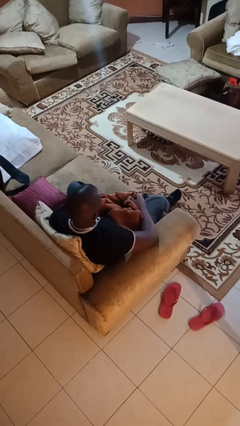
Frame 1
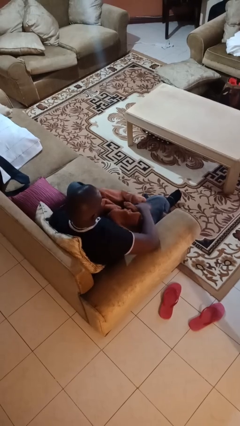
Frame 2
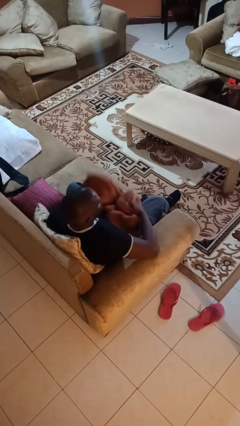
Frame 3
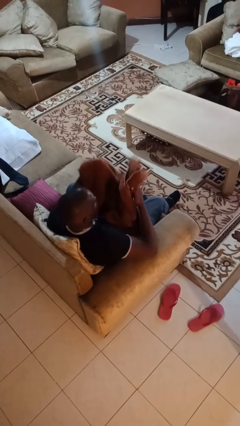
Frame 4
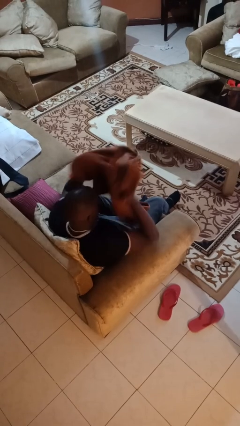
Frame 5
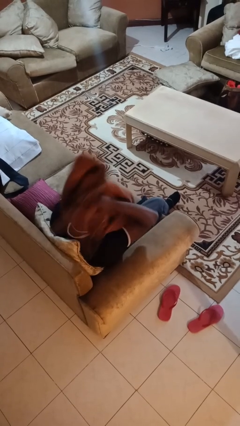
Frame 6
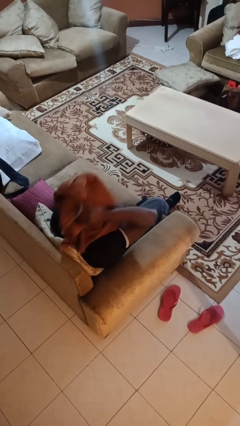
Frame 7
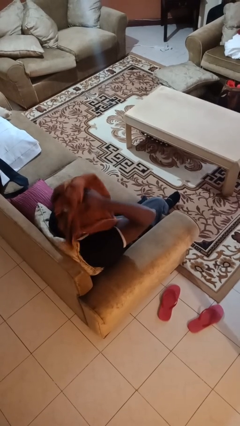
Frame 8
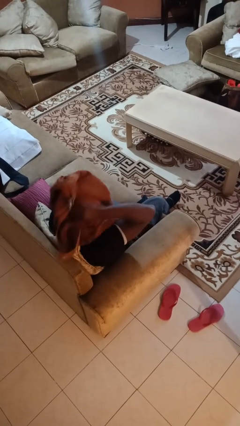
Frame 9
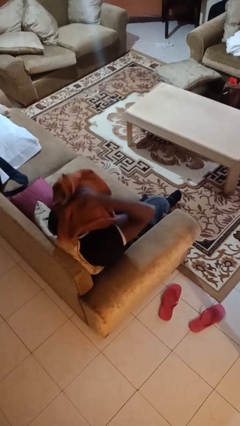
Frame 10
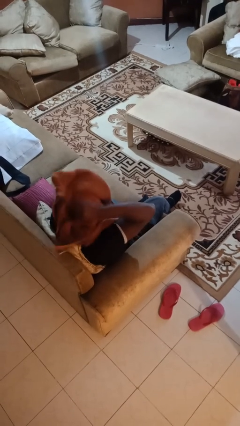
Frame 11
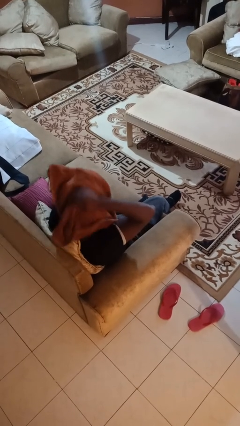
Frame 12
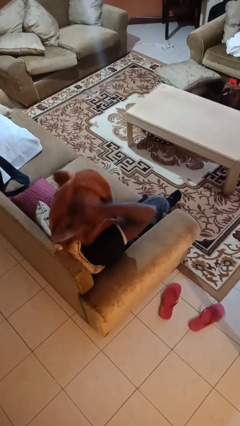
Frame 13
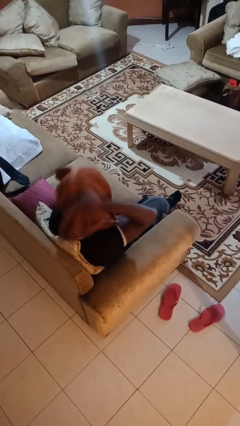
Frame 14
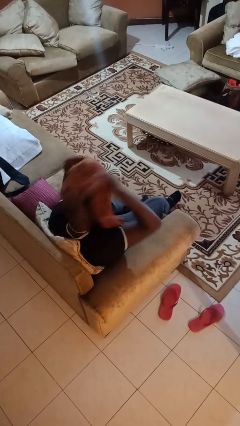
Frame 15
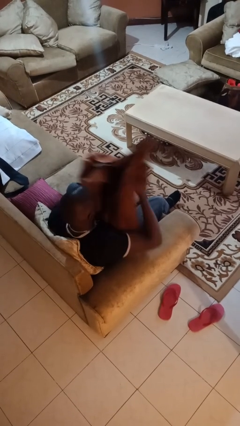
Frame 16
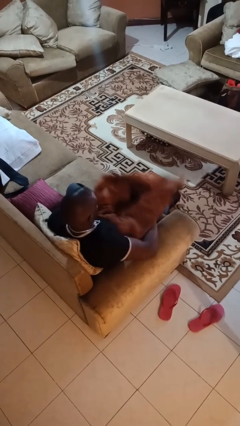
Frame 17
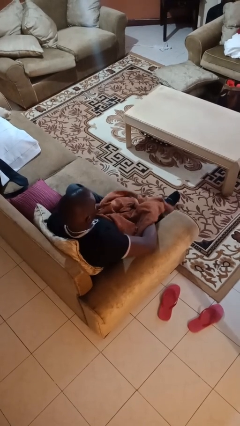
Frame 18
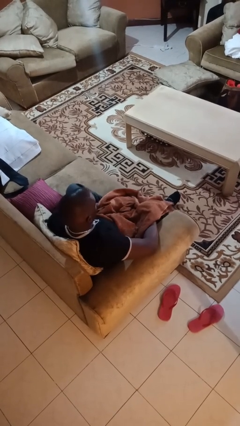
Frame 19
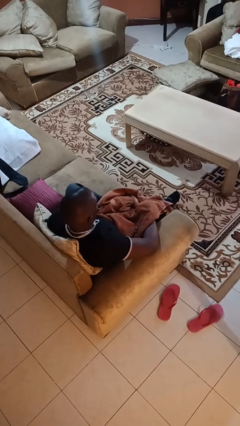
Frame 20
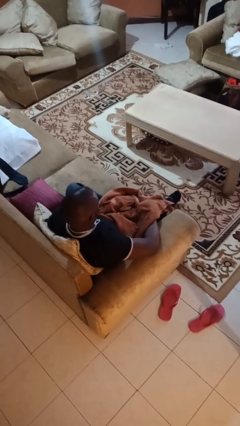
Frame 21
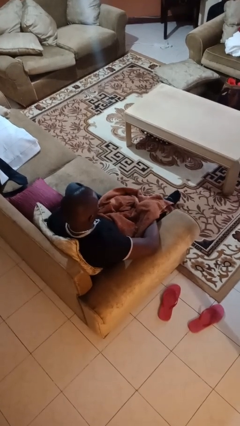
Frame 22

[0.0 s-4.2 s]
person dries hair with towel

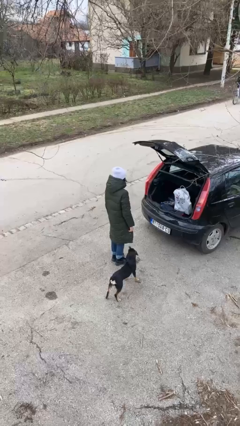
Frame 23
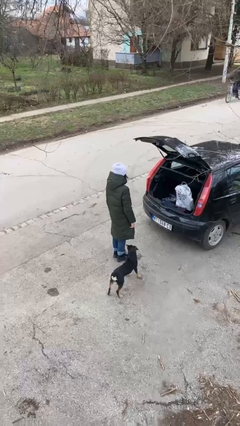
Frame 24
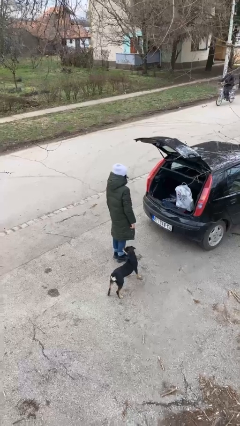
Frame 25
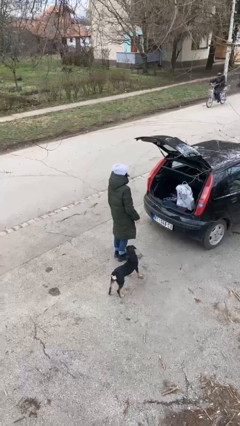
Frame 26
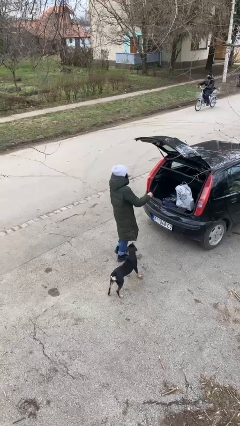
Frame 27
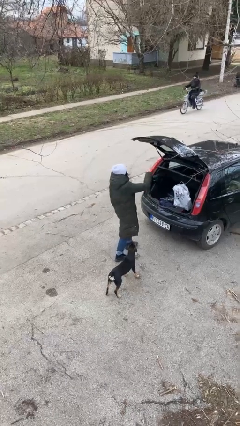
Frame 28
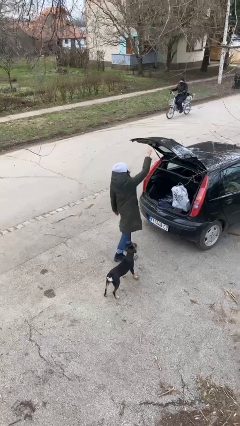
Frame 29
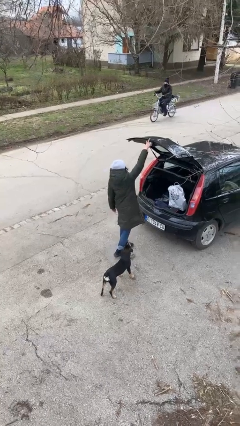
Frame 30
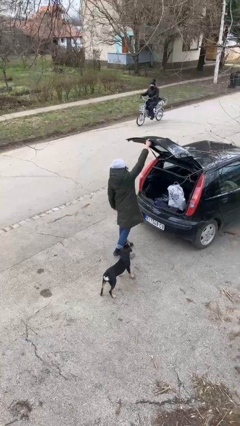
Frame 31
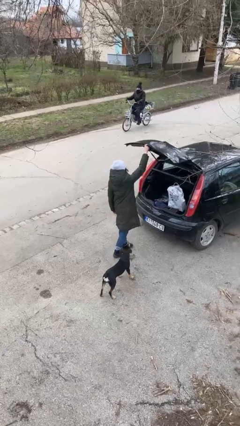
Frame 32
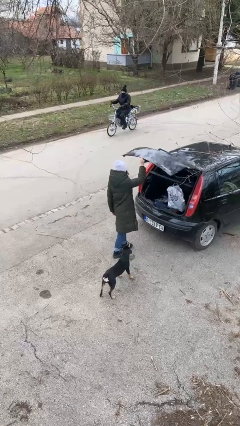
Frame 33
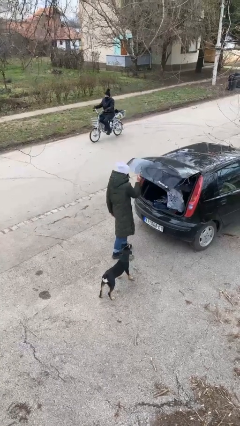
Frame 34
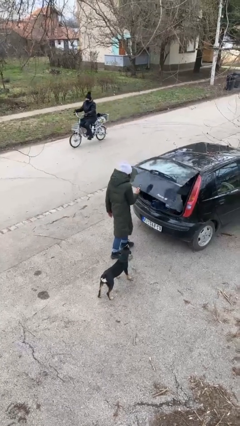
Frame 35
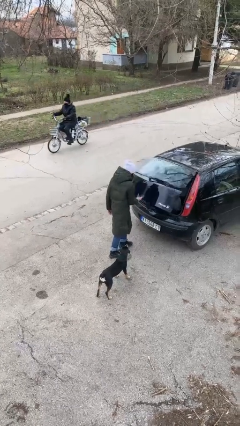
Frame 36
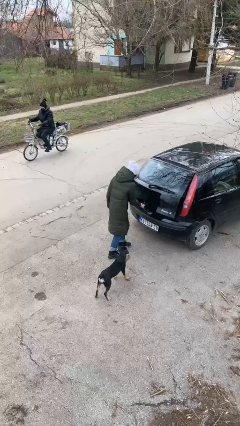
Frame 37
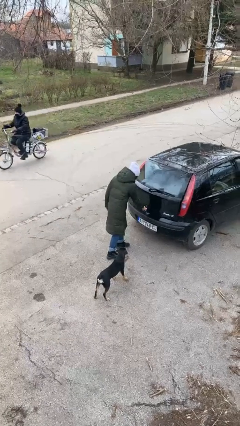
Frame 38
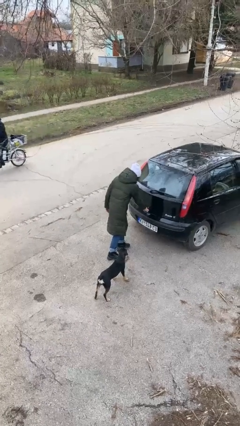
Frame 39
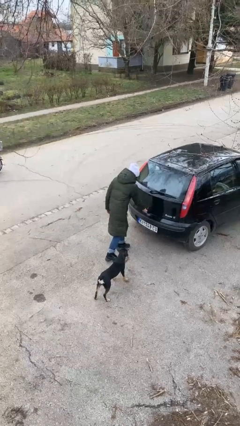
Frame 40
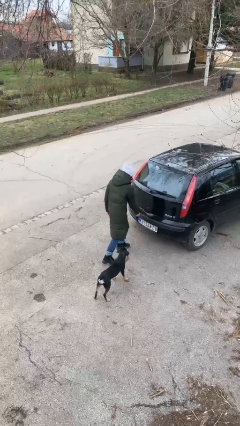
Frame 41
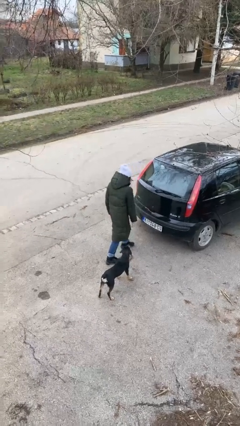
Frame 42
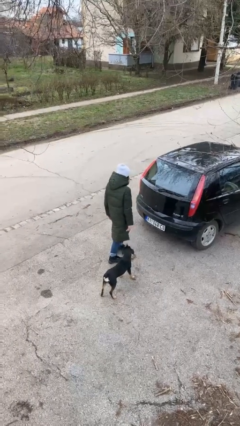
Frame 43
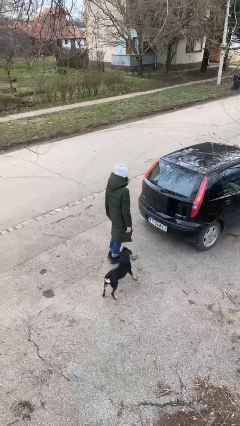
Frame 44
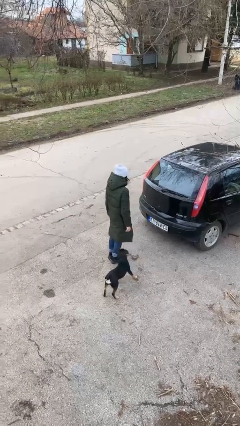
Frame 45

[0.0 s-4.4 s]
person closes car trunk

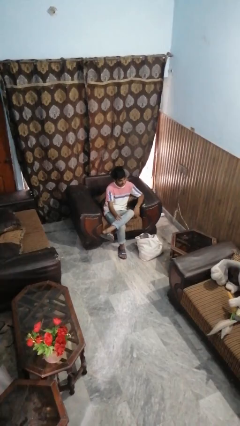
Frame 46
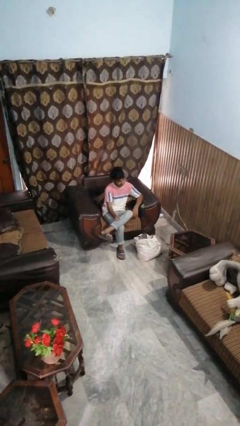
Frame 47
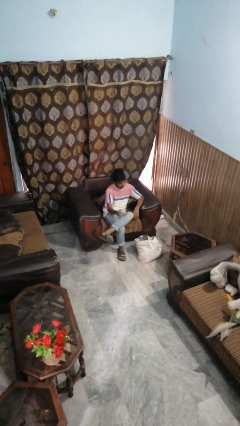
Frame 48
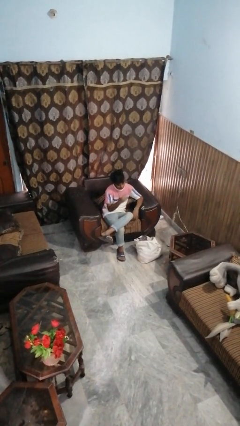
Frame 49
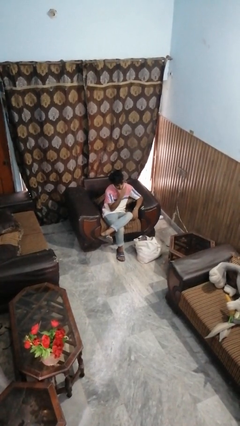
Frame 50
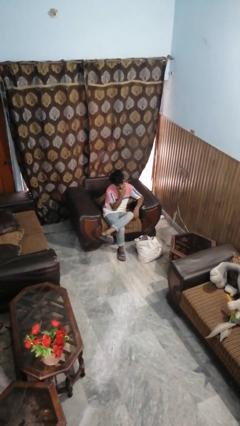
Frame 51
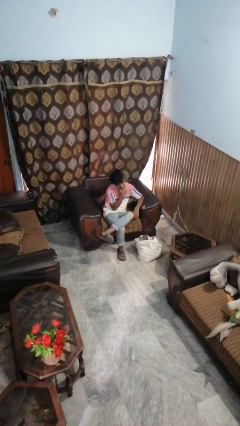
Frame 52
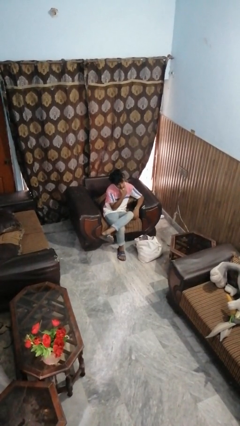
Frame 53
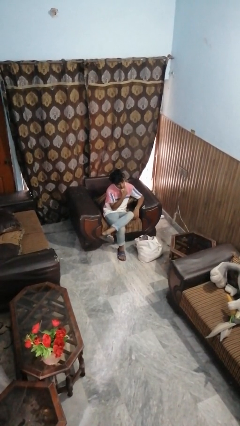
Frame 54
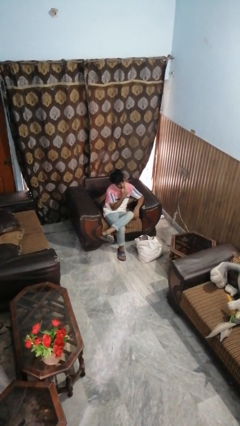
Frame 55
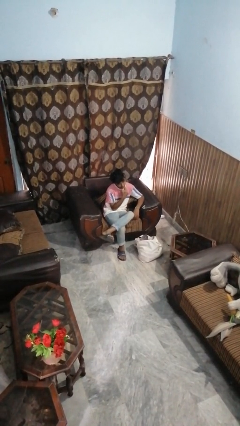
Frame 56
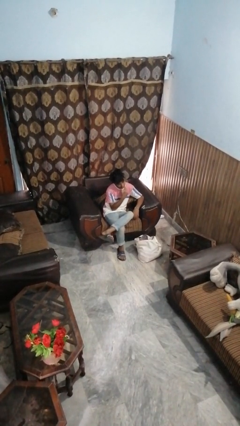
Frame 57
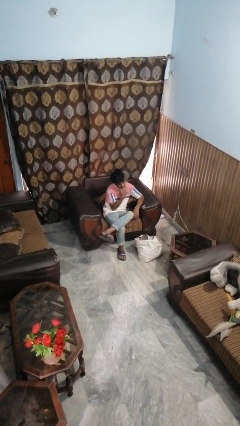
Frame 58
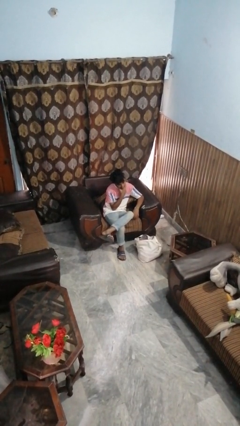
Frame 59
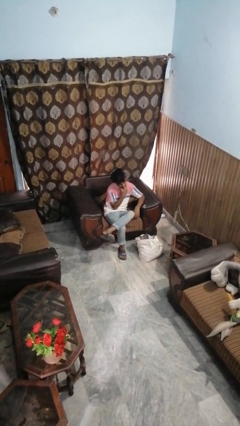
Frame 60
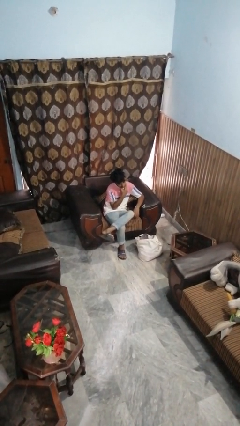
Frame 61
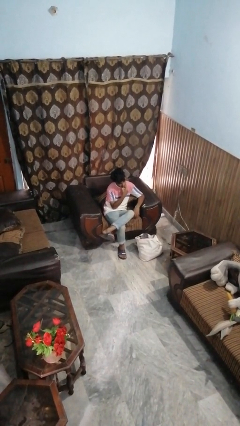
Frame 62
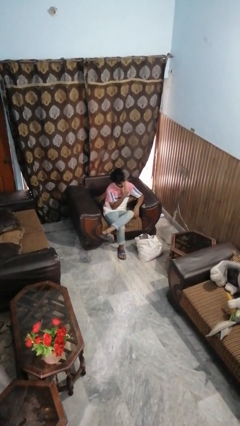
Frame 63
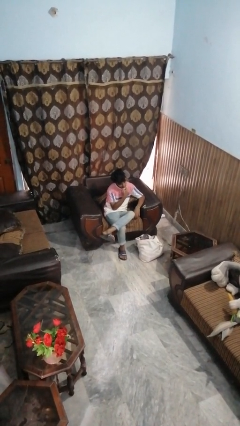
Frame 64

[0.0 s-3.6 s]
person strokes chin

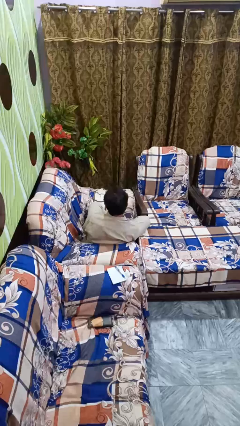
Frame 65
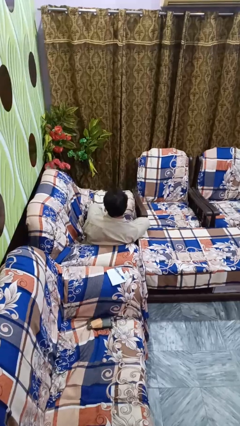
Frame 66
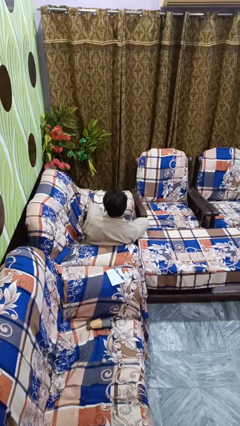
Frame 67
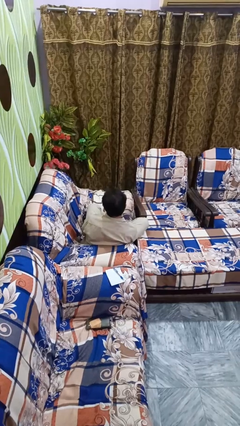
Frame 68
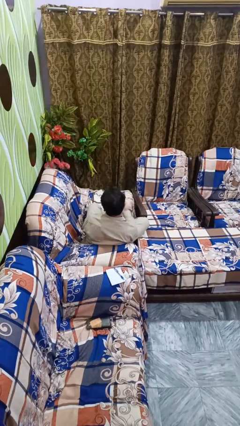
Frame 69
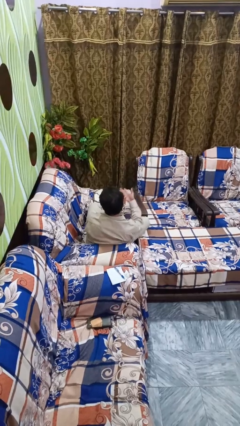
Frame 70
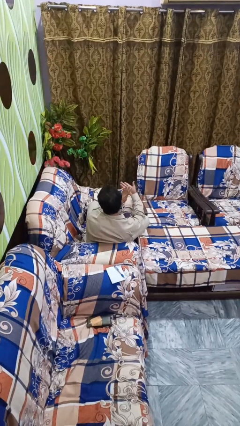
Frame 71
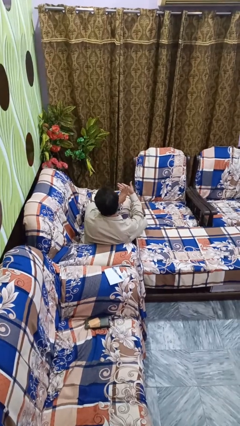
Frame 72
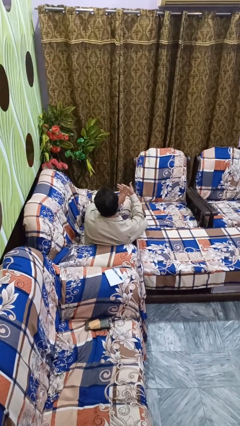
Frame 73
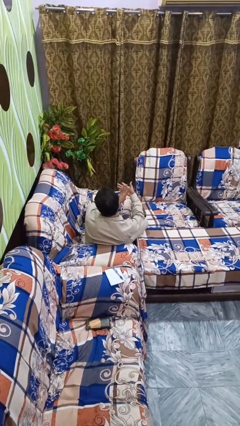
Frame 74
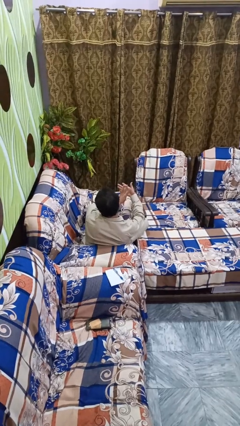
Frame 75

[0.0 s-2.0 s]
person gestures number four

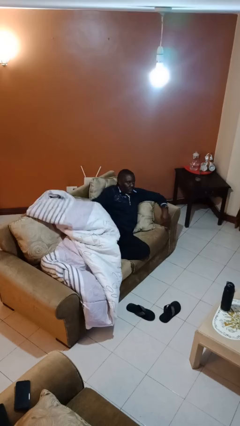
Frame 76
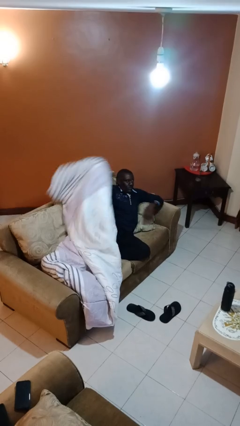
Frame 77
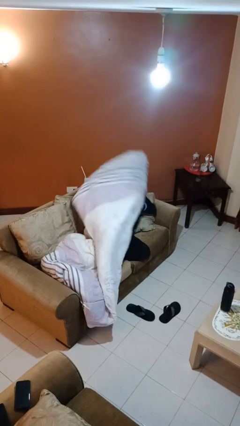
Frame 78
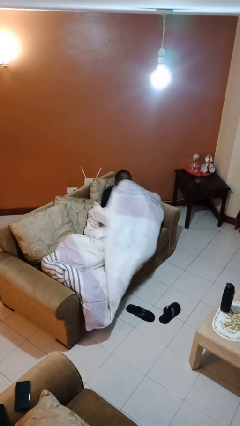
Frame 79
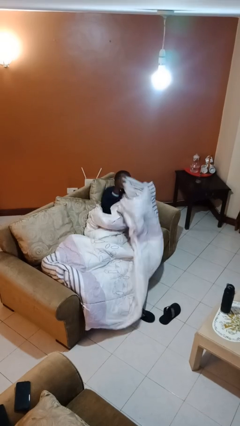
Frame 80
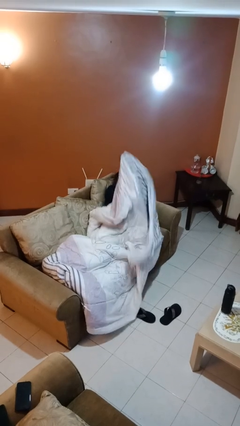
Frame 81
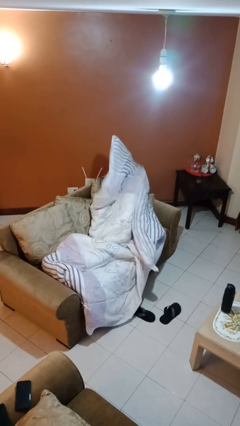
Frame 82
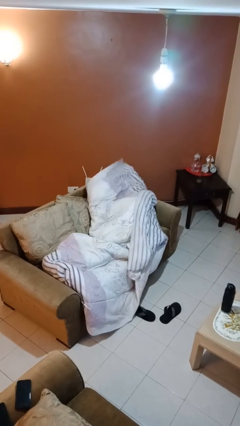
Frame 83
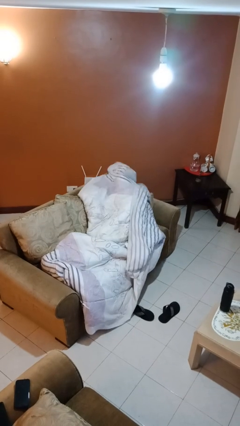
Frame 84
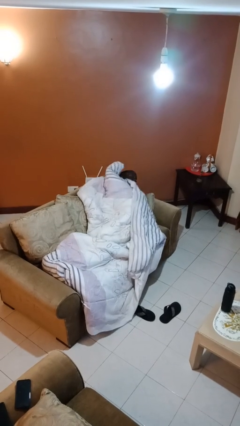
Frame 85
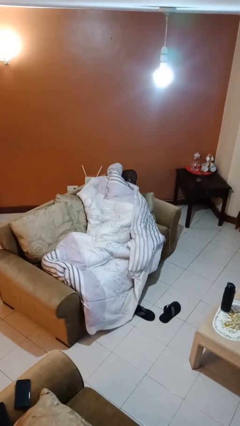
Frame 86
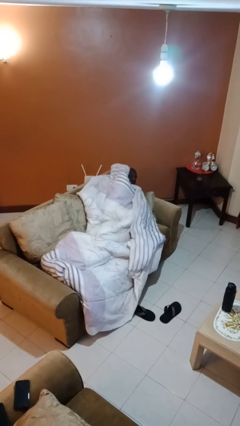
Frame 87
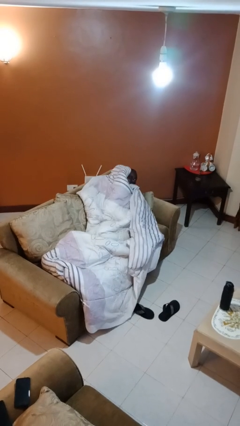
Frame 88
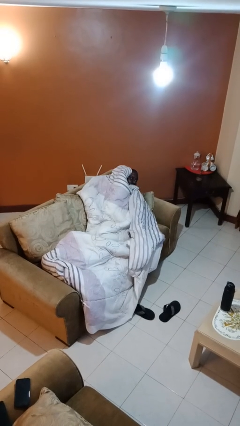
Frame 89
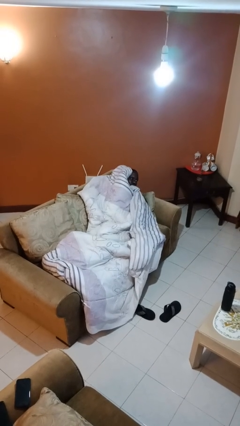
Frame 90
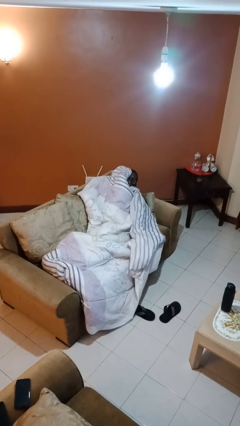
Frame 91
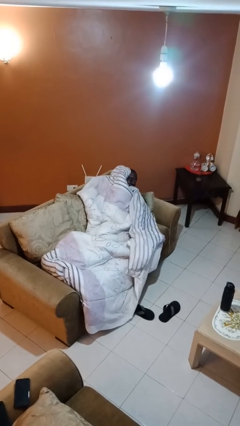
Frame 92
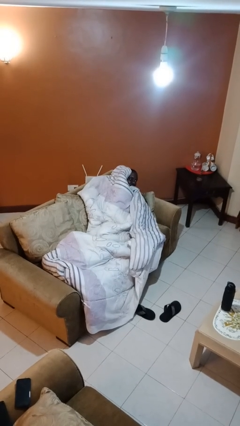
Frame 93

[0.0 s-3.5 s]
person covers with blanket
